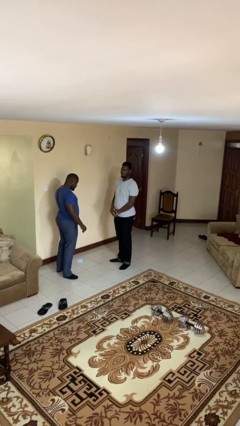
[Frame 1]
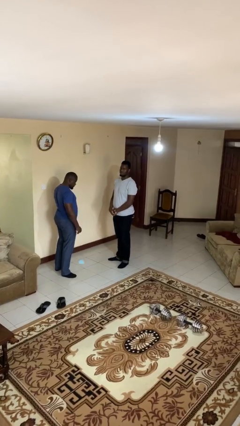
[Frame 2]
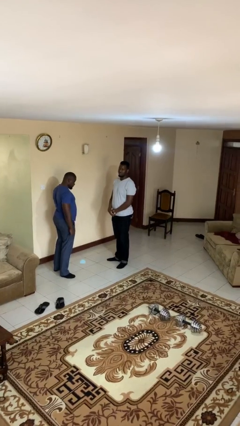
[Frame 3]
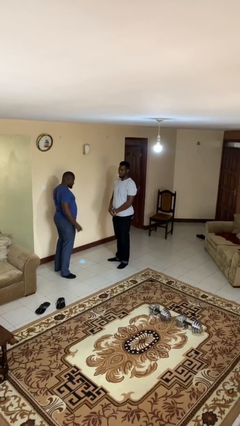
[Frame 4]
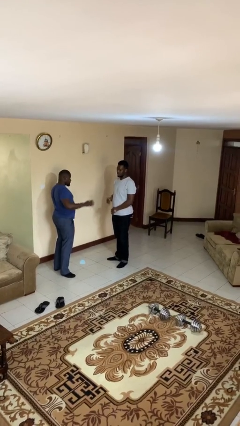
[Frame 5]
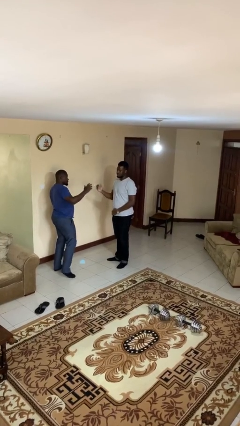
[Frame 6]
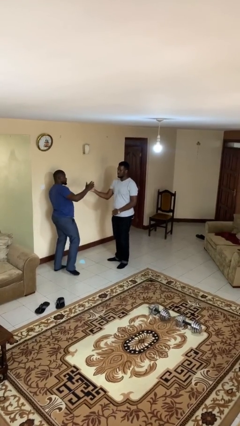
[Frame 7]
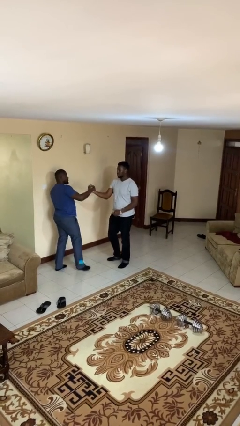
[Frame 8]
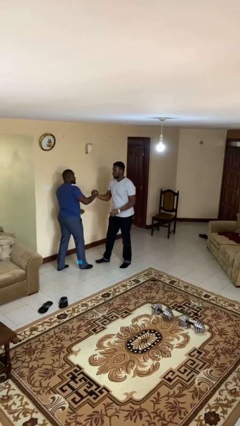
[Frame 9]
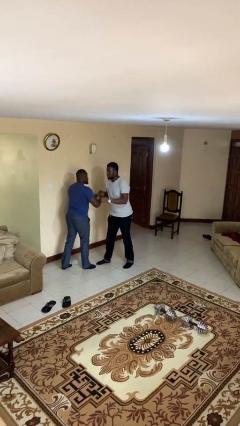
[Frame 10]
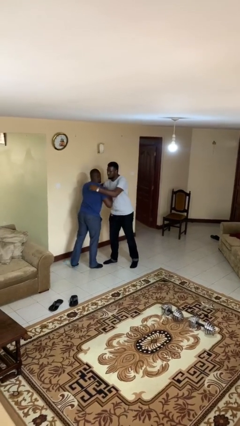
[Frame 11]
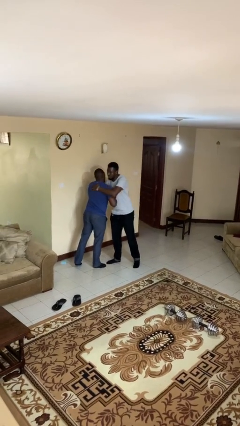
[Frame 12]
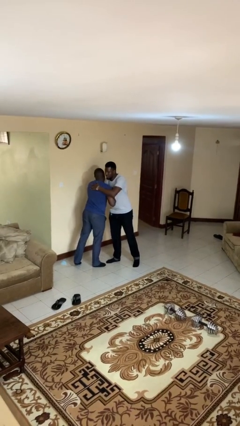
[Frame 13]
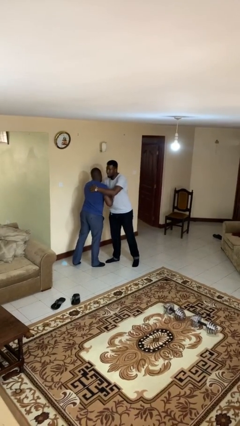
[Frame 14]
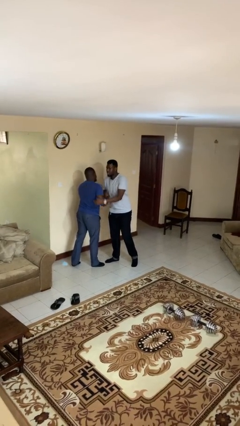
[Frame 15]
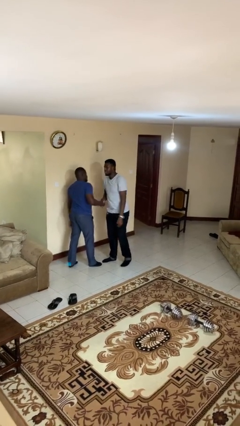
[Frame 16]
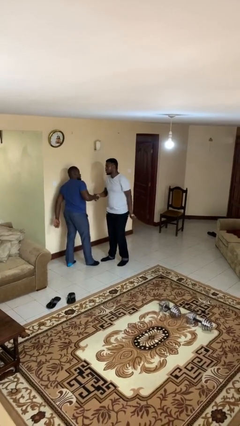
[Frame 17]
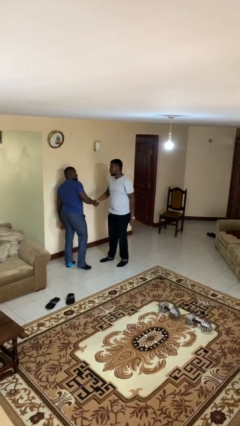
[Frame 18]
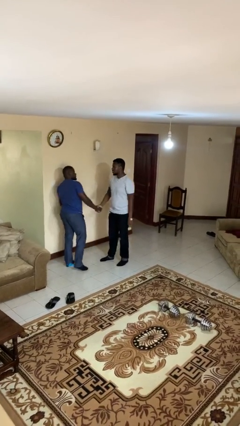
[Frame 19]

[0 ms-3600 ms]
person embraces person

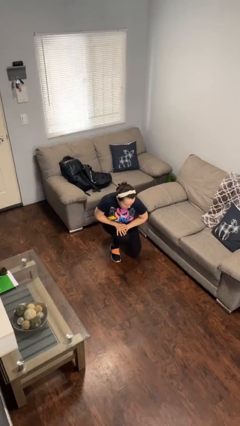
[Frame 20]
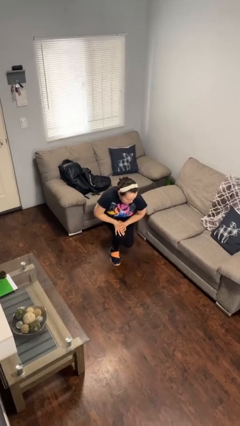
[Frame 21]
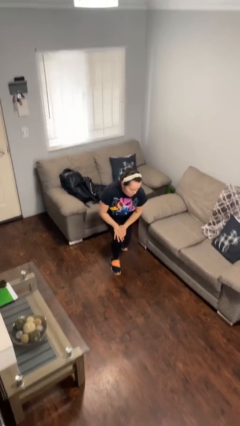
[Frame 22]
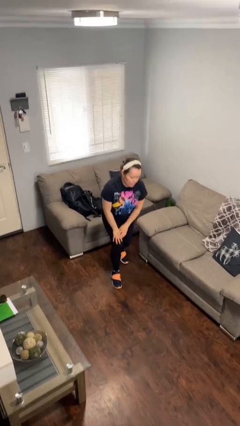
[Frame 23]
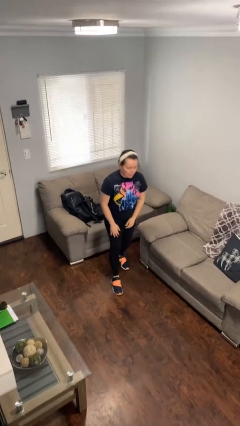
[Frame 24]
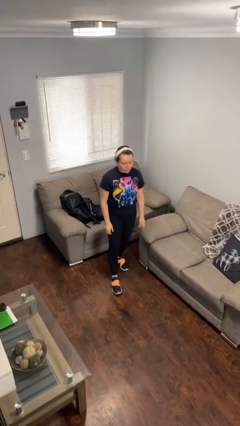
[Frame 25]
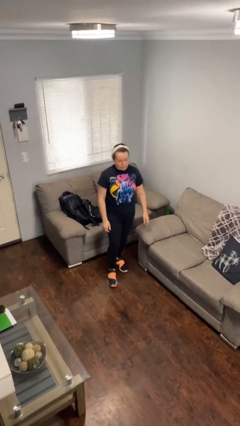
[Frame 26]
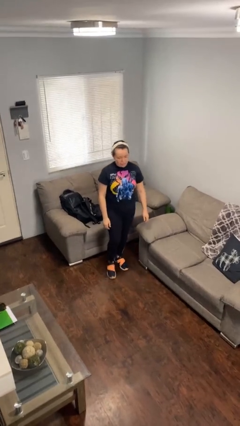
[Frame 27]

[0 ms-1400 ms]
person stands up from floor

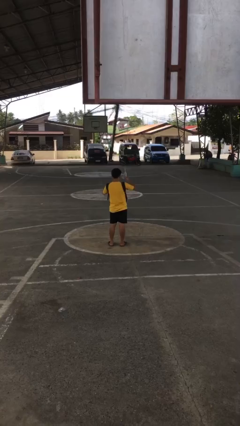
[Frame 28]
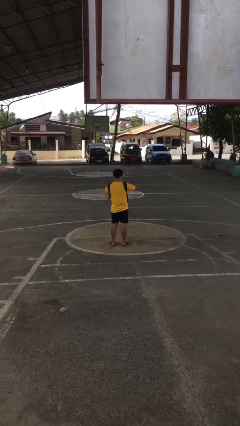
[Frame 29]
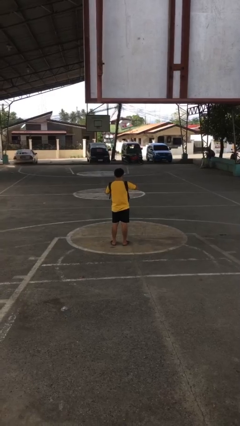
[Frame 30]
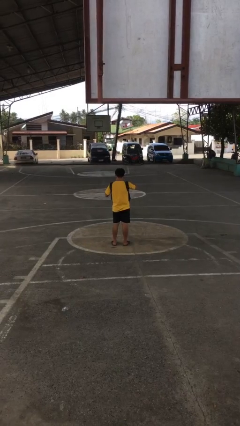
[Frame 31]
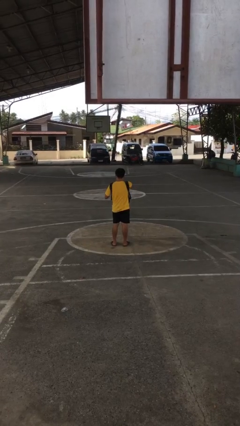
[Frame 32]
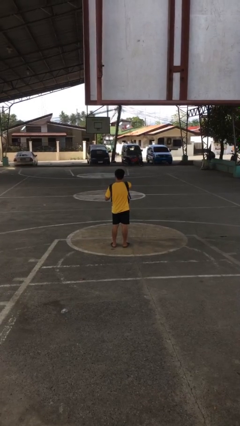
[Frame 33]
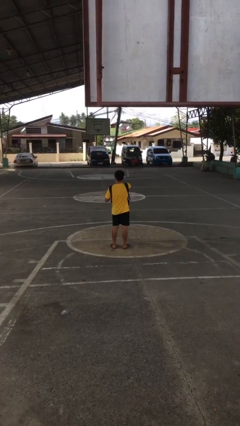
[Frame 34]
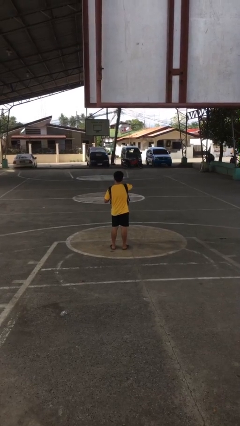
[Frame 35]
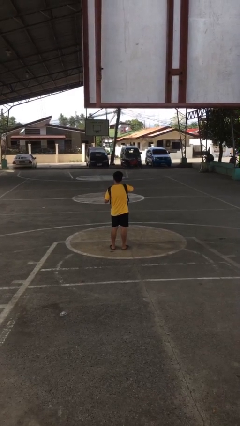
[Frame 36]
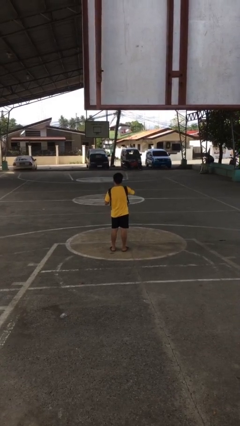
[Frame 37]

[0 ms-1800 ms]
person puts object into backpack

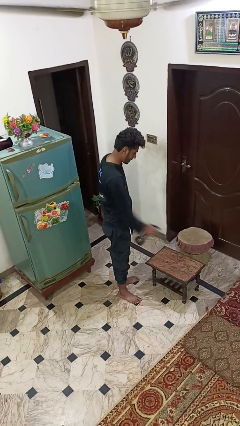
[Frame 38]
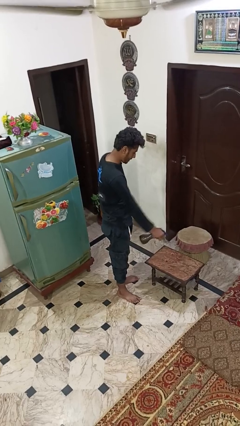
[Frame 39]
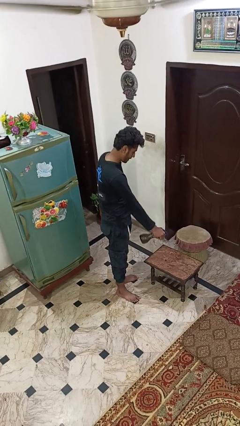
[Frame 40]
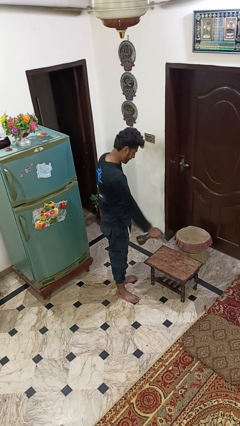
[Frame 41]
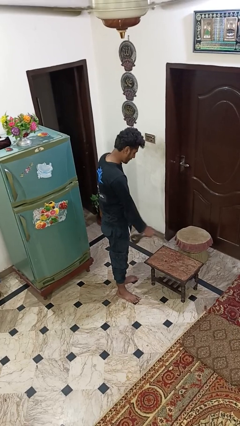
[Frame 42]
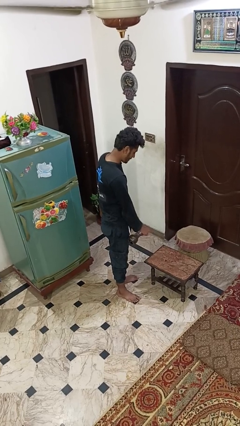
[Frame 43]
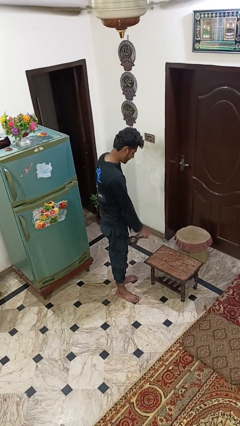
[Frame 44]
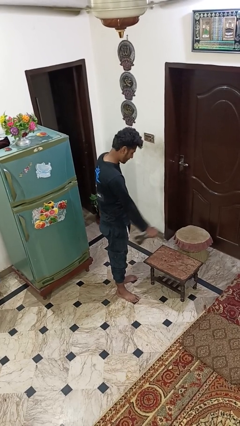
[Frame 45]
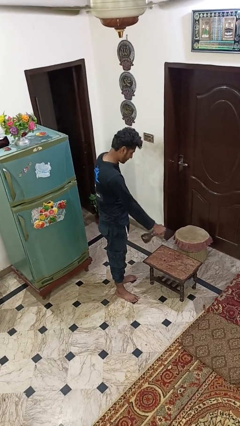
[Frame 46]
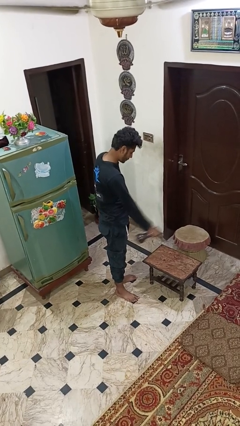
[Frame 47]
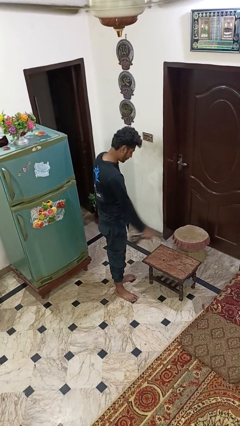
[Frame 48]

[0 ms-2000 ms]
person sprays from bottle

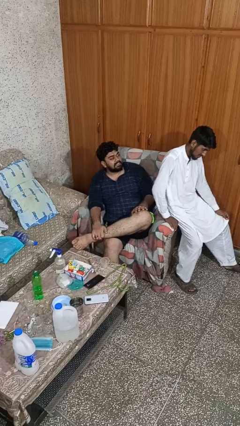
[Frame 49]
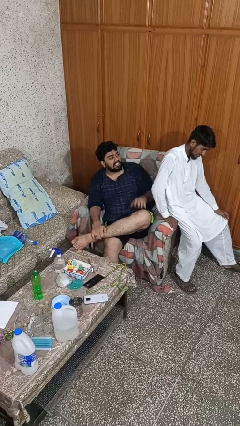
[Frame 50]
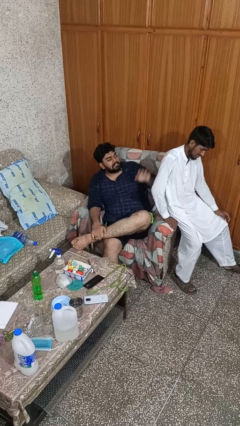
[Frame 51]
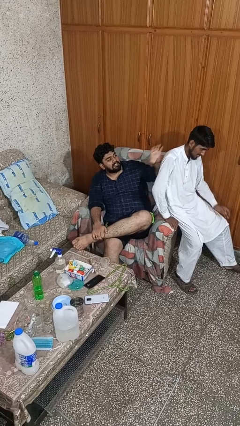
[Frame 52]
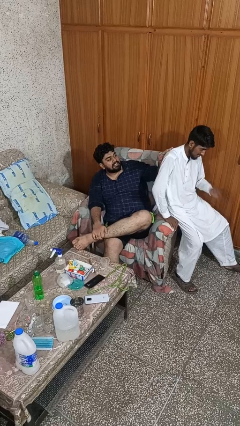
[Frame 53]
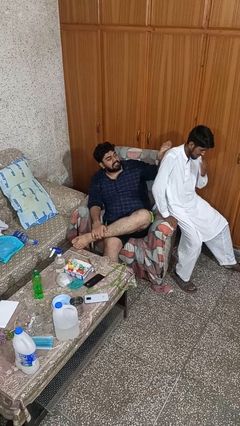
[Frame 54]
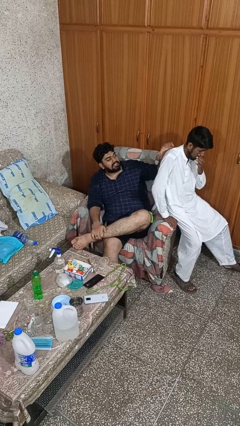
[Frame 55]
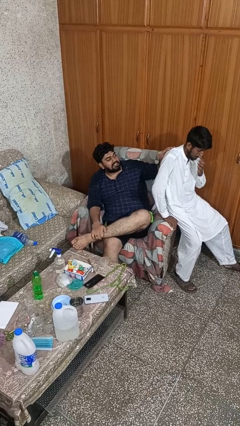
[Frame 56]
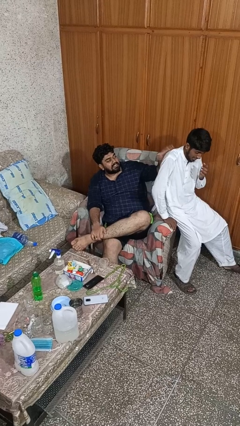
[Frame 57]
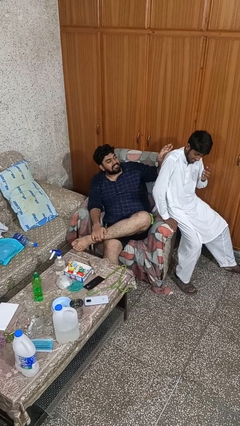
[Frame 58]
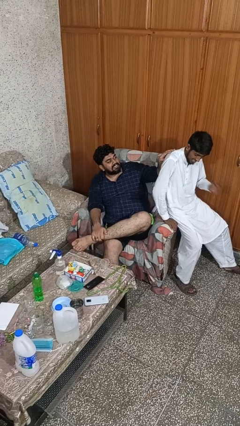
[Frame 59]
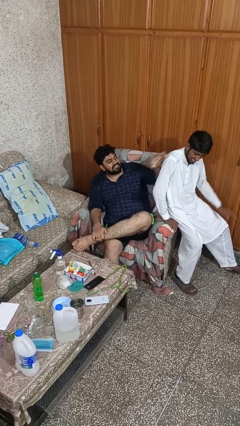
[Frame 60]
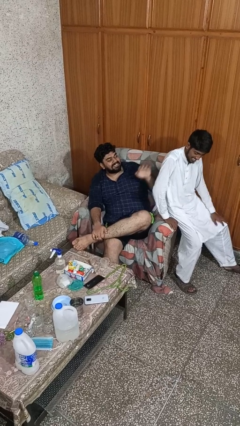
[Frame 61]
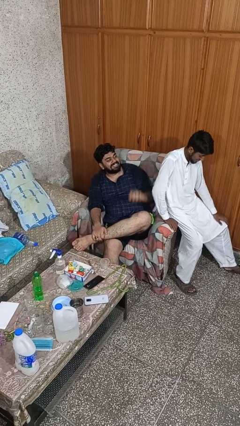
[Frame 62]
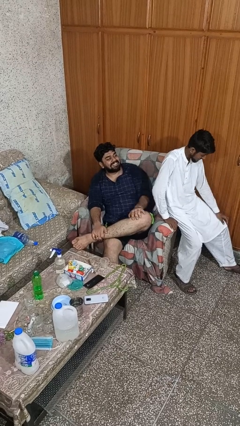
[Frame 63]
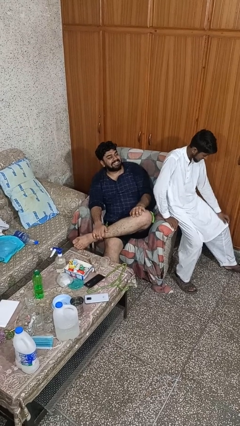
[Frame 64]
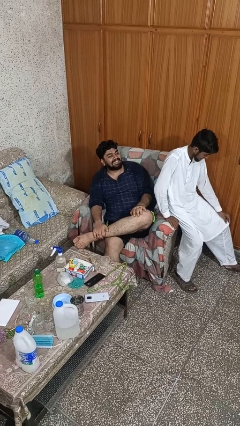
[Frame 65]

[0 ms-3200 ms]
person pounds shoulders of person

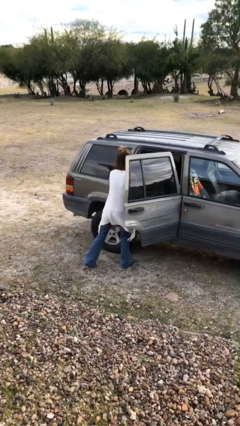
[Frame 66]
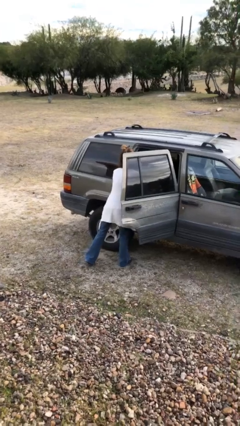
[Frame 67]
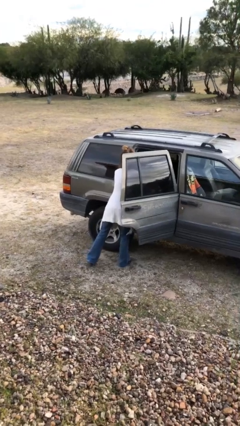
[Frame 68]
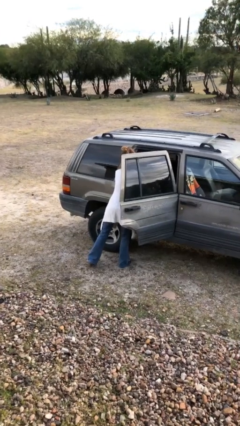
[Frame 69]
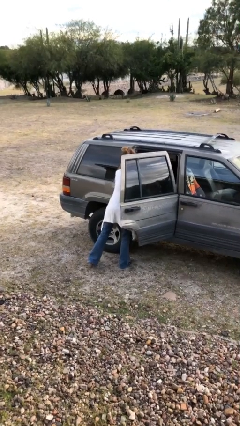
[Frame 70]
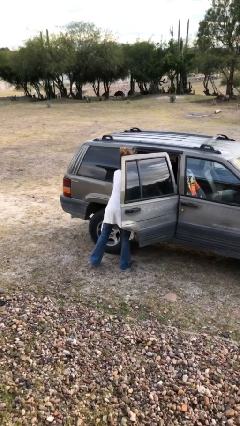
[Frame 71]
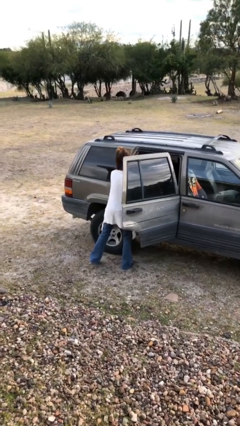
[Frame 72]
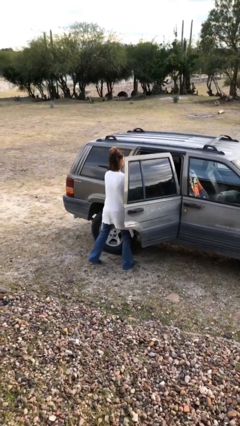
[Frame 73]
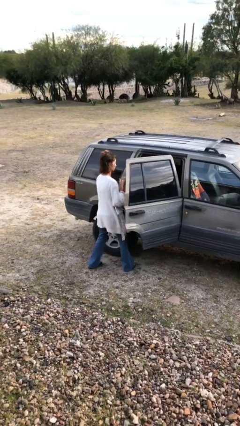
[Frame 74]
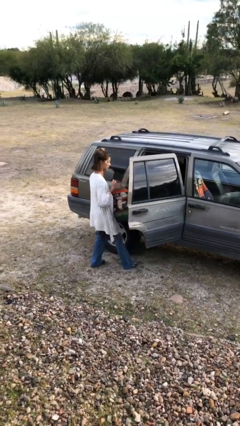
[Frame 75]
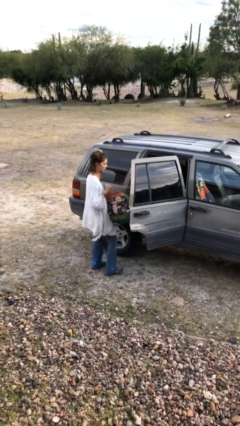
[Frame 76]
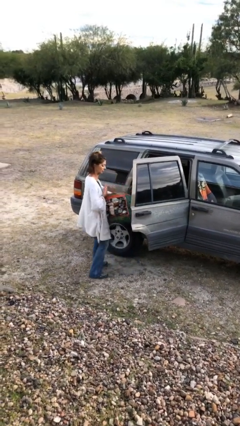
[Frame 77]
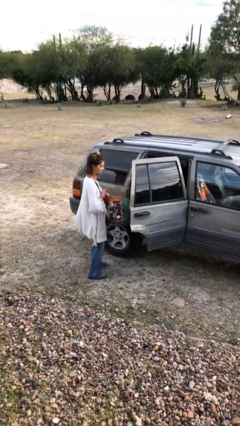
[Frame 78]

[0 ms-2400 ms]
person unloads car

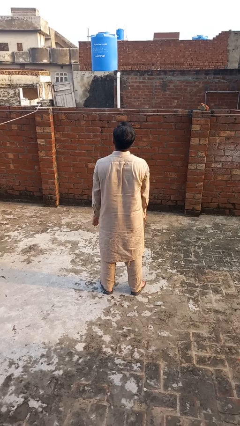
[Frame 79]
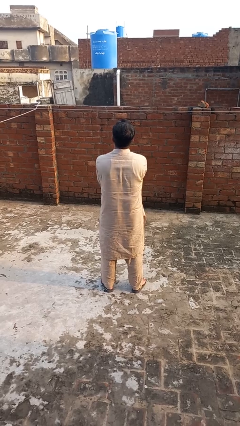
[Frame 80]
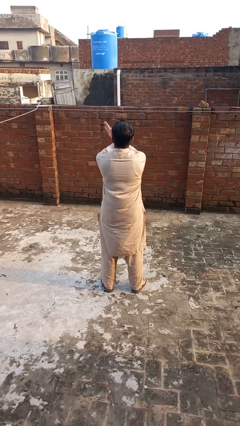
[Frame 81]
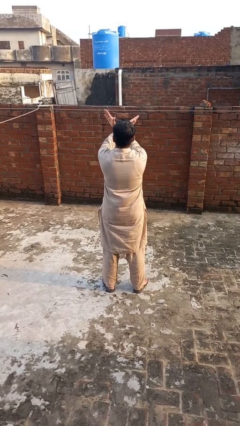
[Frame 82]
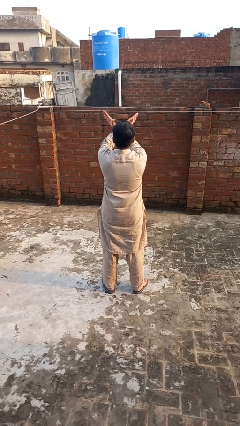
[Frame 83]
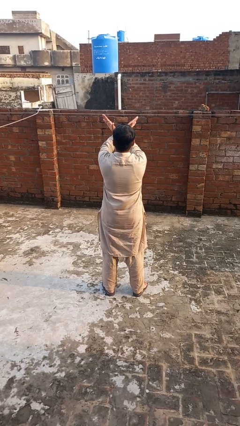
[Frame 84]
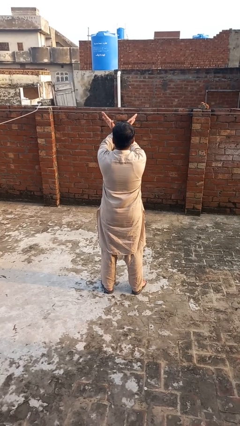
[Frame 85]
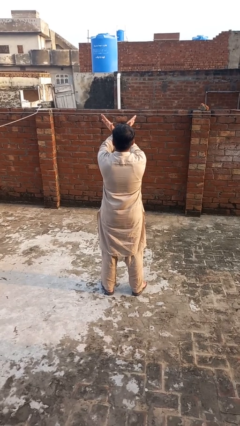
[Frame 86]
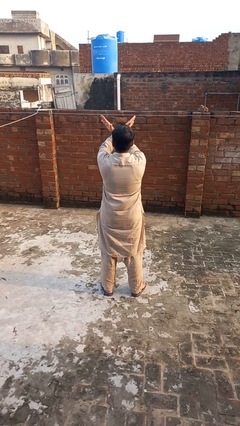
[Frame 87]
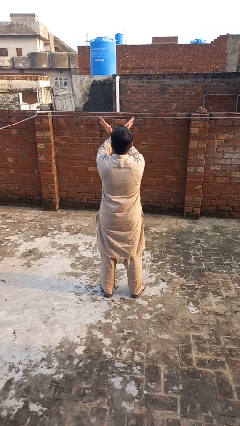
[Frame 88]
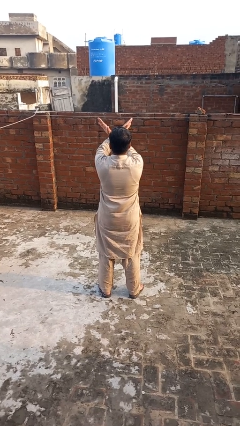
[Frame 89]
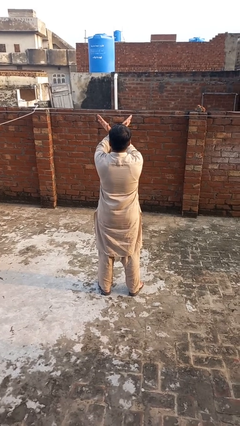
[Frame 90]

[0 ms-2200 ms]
person gestures arms x

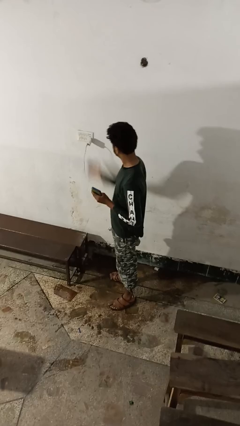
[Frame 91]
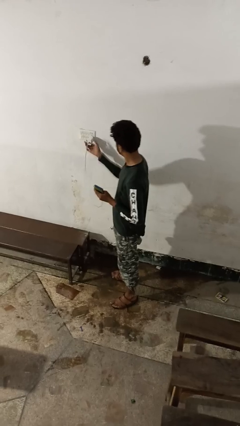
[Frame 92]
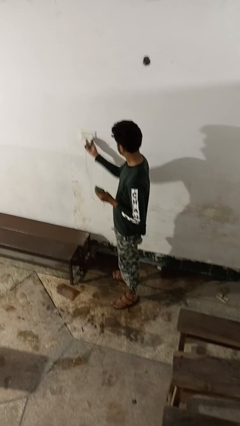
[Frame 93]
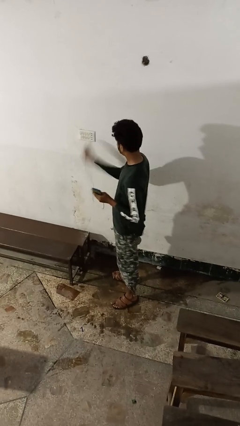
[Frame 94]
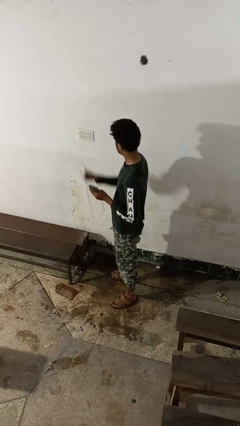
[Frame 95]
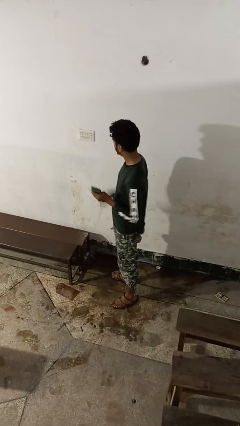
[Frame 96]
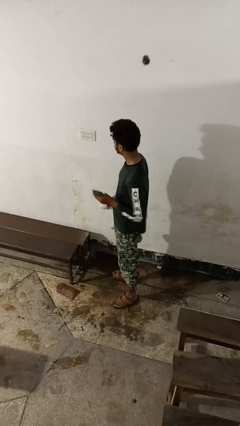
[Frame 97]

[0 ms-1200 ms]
person unplugs from electrical socket
